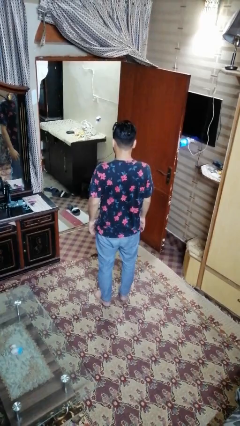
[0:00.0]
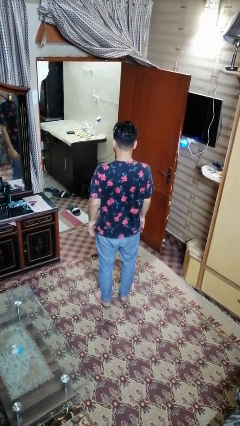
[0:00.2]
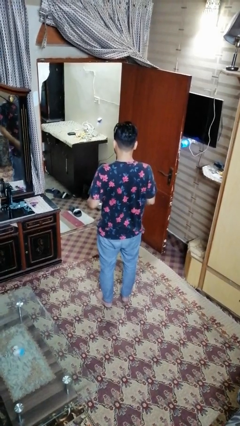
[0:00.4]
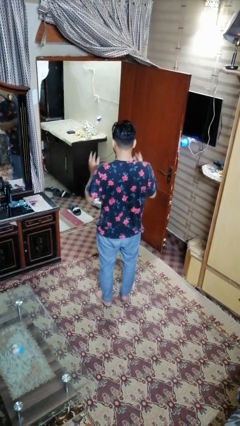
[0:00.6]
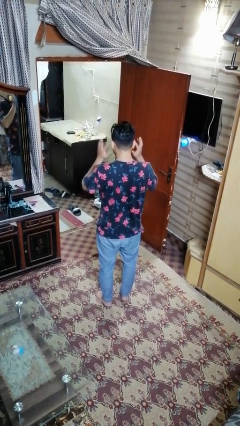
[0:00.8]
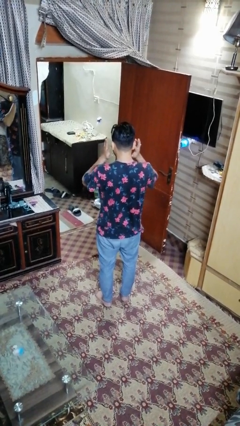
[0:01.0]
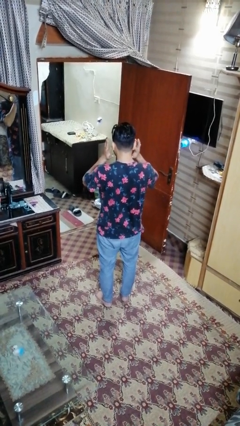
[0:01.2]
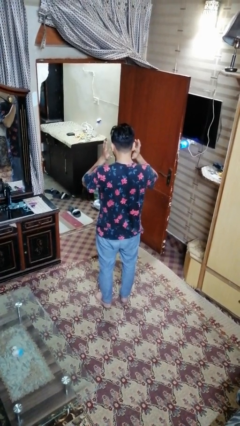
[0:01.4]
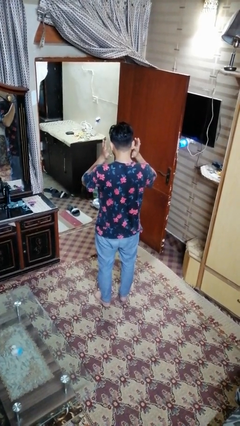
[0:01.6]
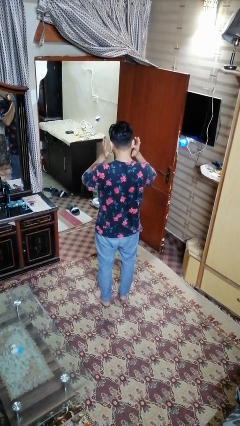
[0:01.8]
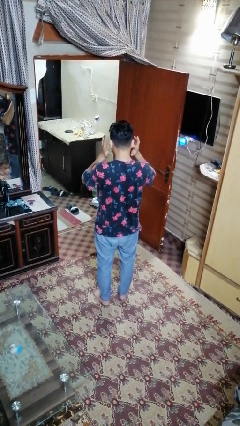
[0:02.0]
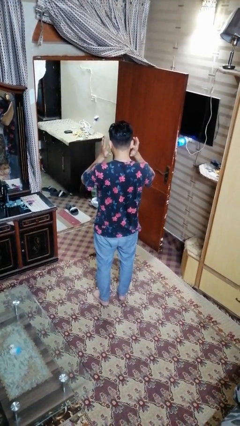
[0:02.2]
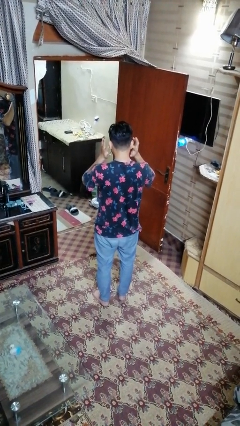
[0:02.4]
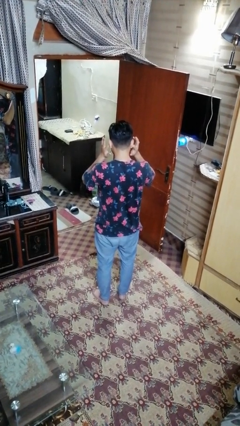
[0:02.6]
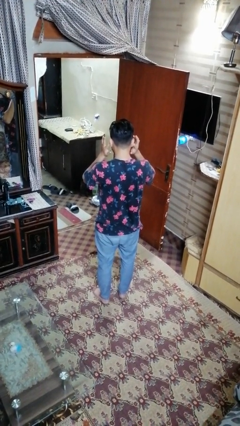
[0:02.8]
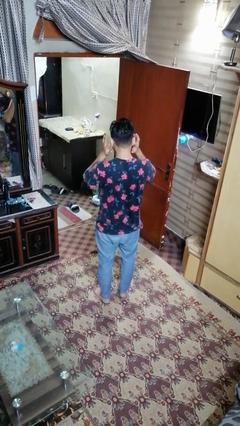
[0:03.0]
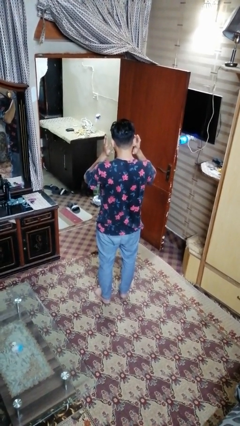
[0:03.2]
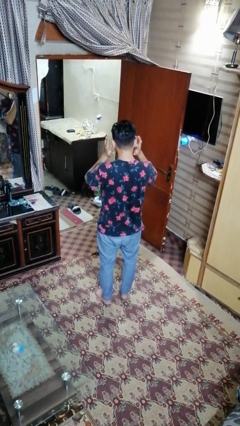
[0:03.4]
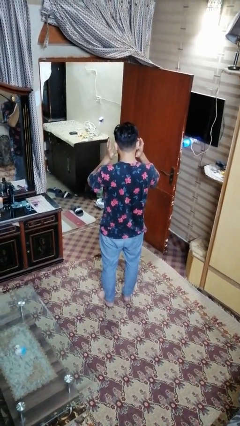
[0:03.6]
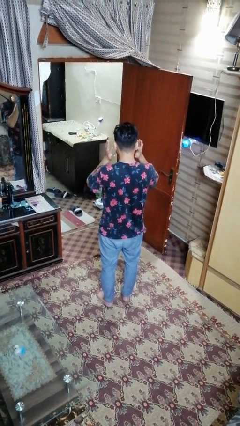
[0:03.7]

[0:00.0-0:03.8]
person puts fingers in ear

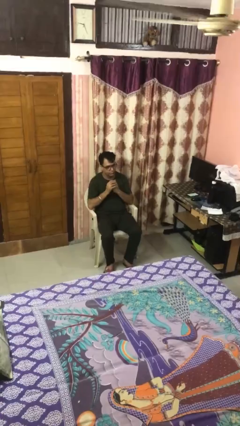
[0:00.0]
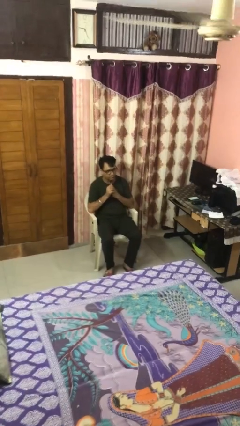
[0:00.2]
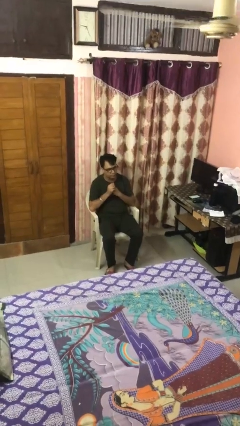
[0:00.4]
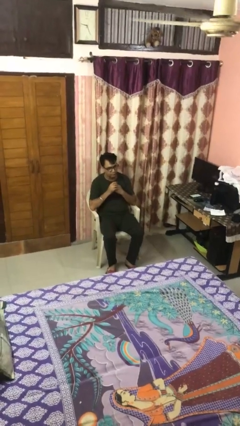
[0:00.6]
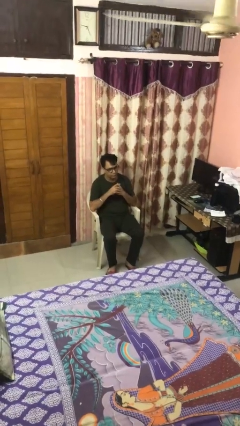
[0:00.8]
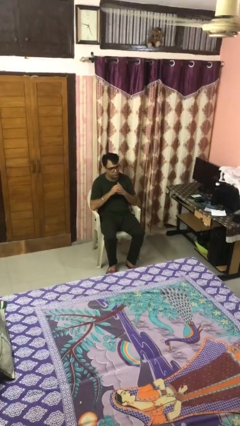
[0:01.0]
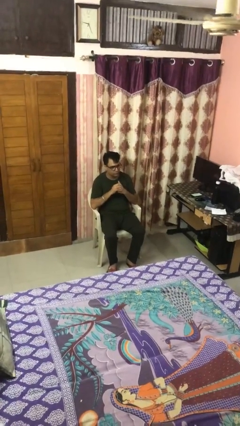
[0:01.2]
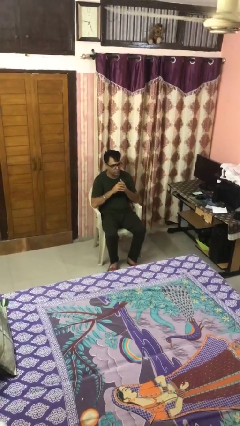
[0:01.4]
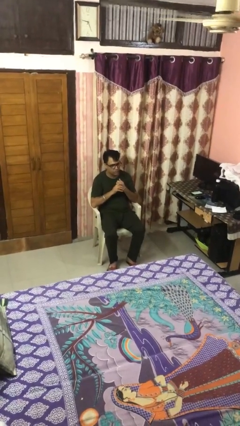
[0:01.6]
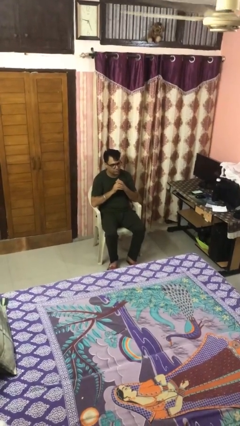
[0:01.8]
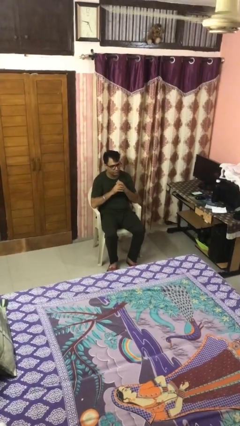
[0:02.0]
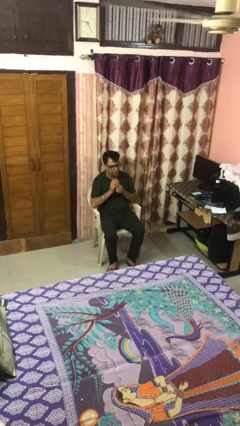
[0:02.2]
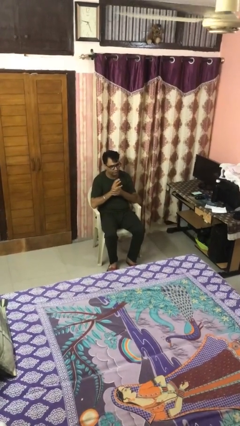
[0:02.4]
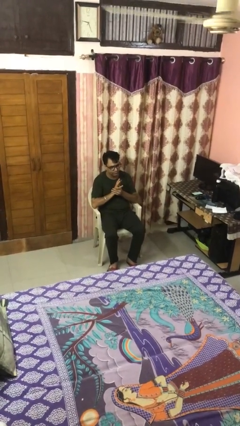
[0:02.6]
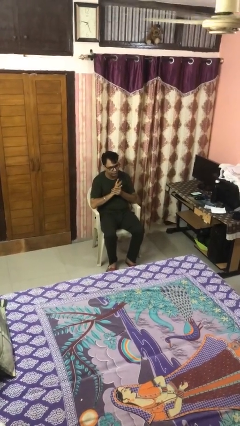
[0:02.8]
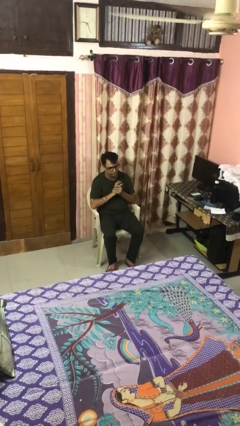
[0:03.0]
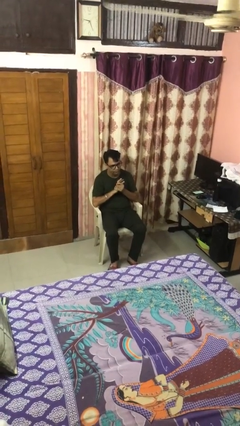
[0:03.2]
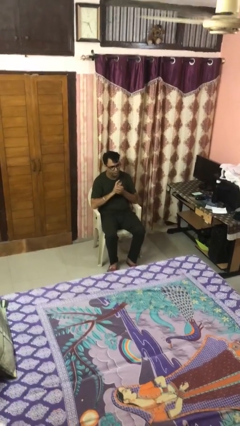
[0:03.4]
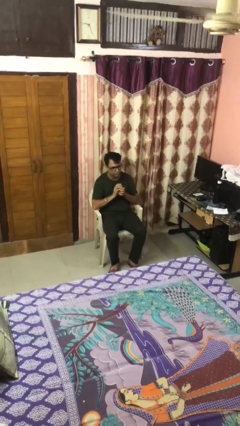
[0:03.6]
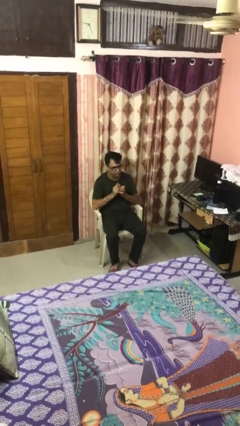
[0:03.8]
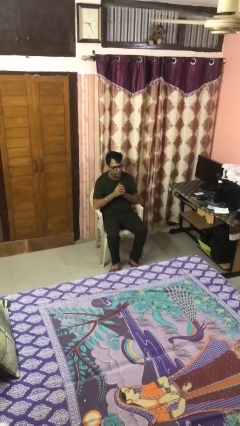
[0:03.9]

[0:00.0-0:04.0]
person cracks knuckles

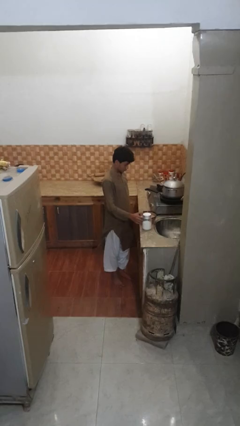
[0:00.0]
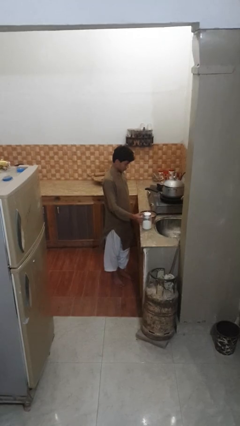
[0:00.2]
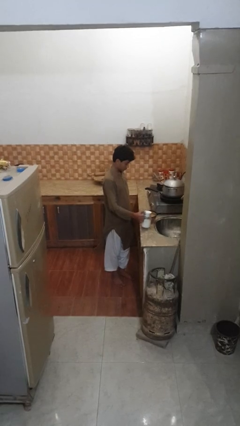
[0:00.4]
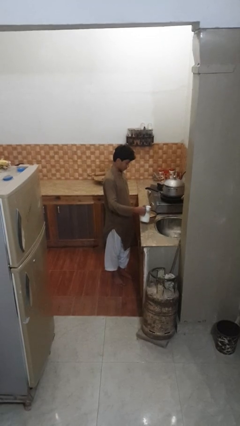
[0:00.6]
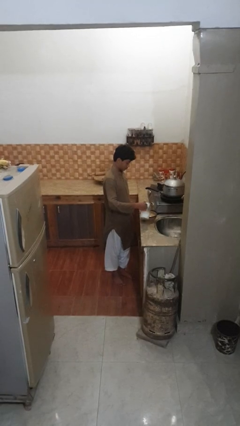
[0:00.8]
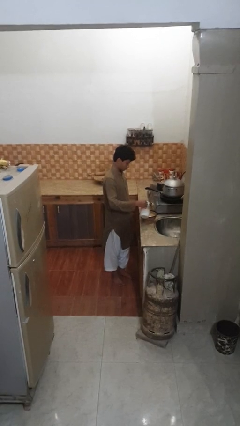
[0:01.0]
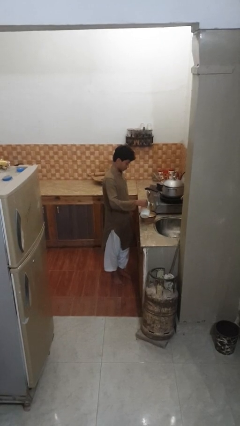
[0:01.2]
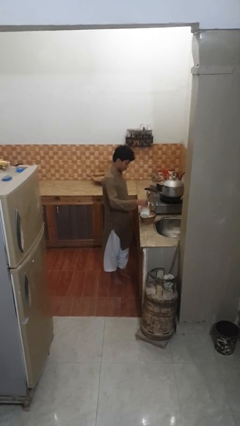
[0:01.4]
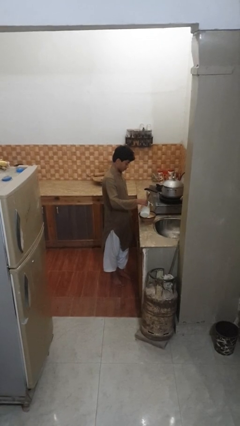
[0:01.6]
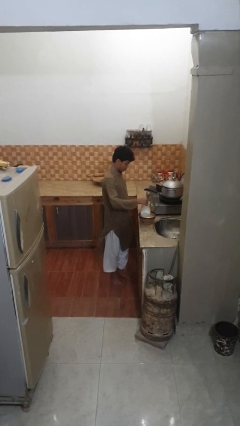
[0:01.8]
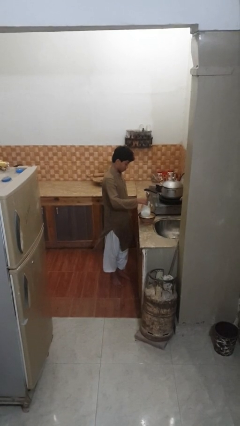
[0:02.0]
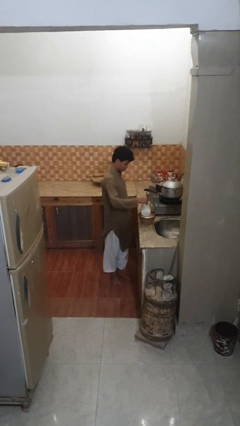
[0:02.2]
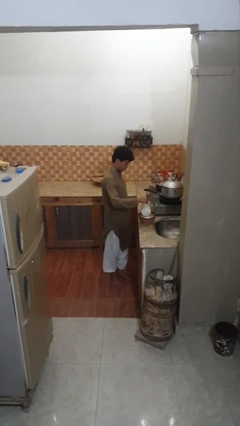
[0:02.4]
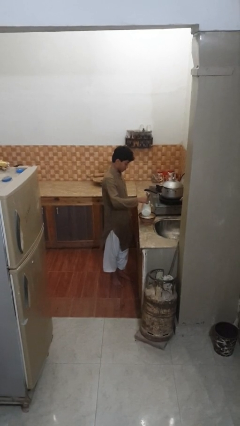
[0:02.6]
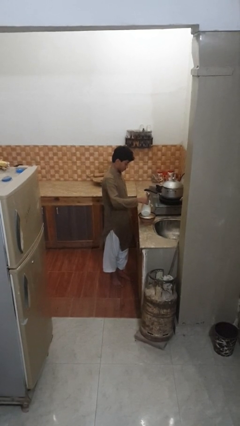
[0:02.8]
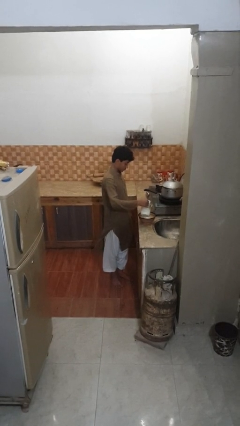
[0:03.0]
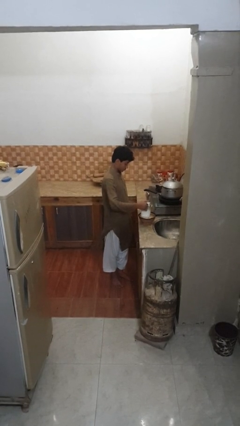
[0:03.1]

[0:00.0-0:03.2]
person pours into bowl

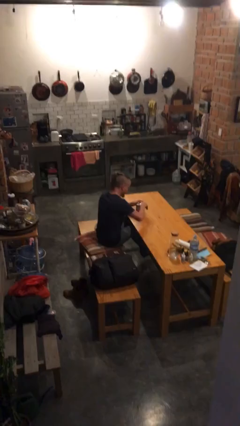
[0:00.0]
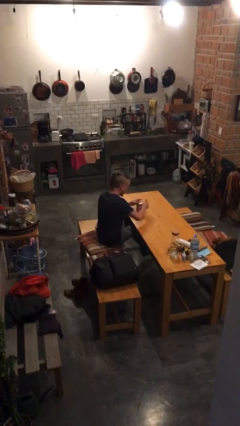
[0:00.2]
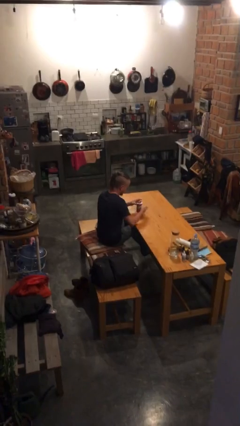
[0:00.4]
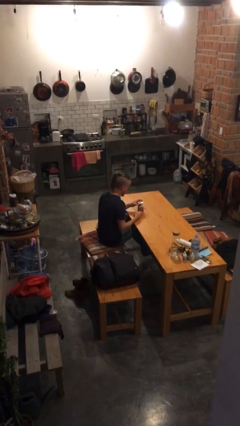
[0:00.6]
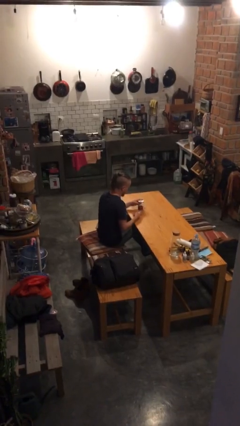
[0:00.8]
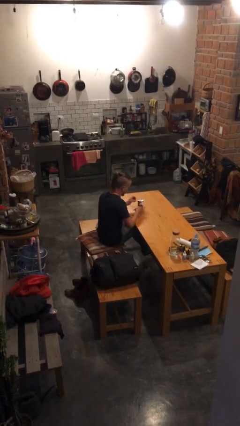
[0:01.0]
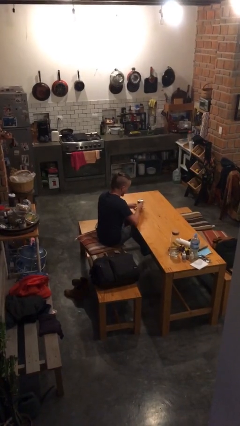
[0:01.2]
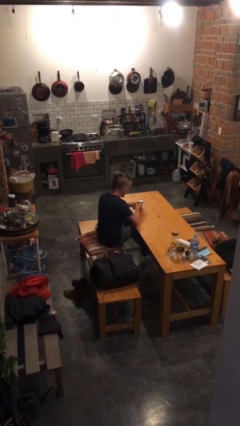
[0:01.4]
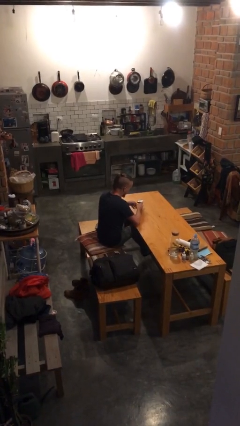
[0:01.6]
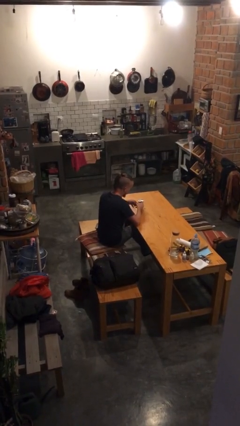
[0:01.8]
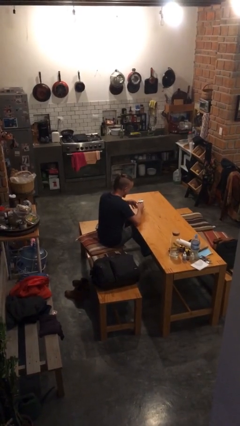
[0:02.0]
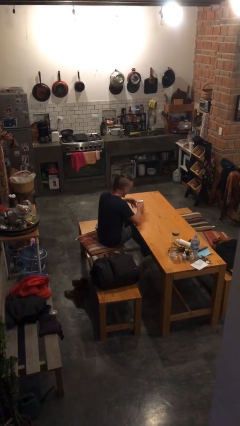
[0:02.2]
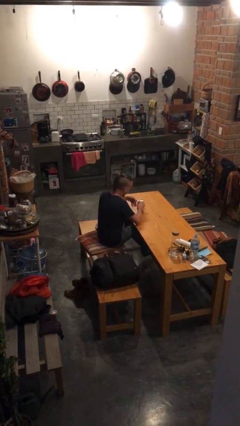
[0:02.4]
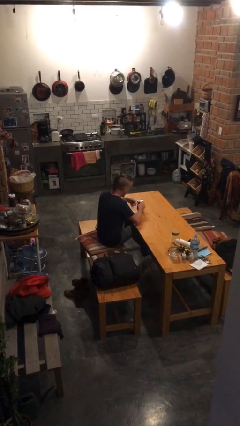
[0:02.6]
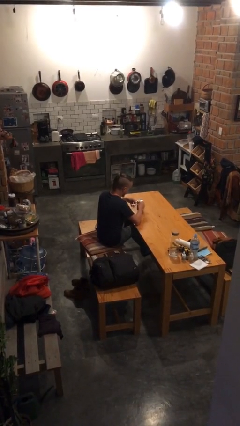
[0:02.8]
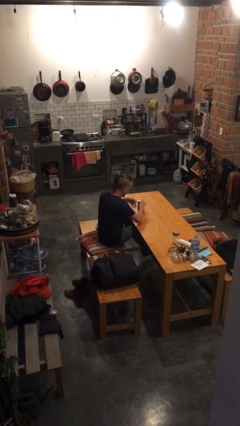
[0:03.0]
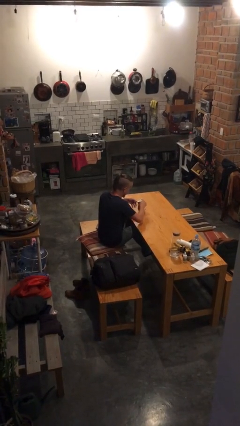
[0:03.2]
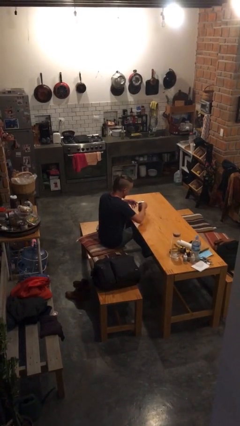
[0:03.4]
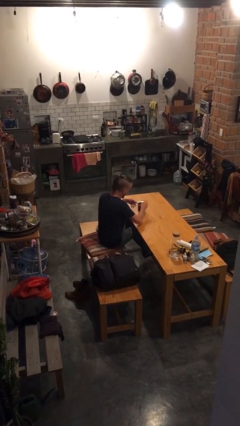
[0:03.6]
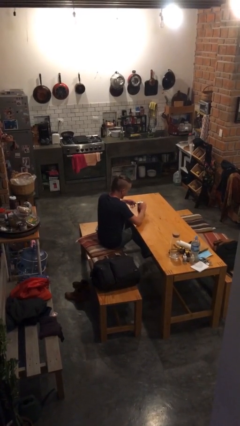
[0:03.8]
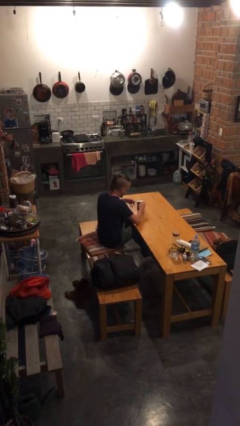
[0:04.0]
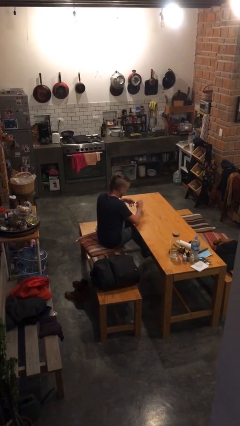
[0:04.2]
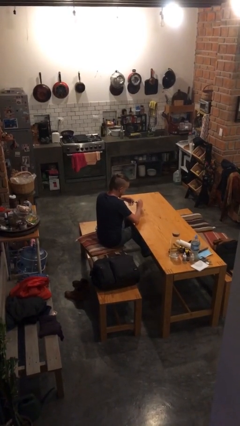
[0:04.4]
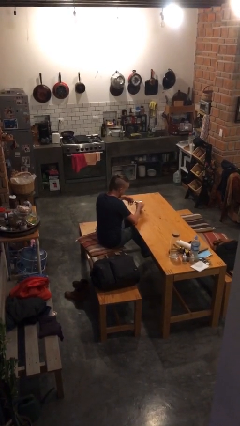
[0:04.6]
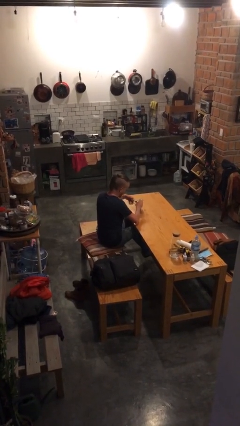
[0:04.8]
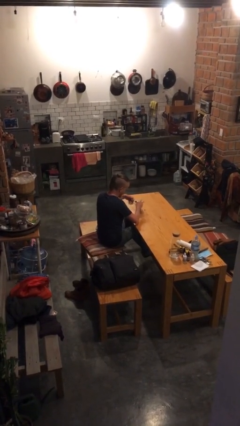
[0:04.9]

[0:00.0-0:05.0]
person opens can with can opener

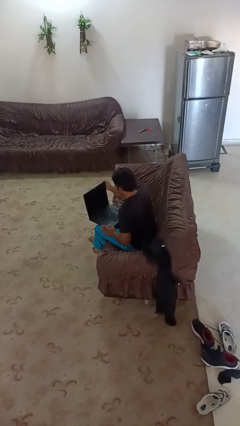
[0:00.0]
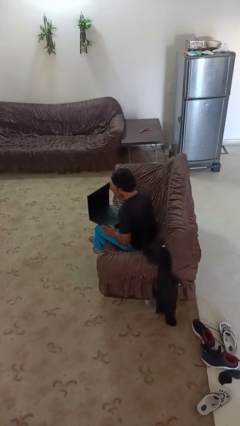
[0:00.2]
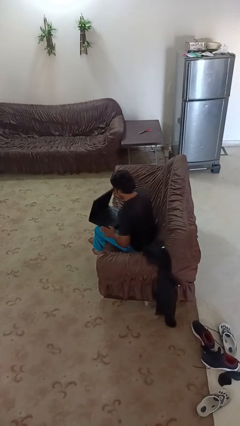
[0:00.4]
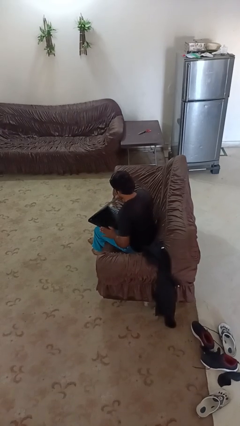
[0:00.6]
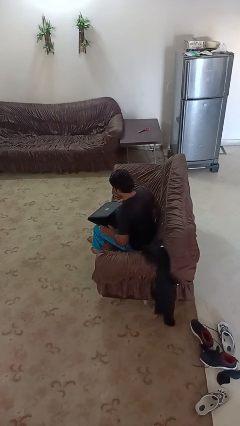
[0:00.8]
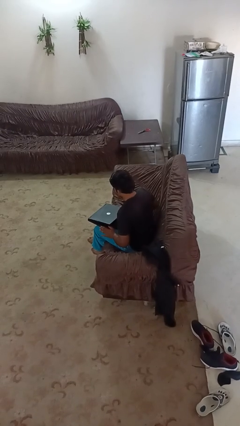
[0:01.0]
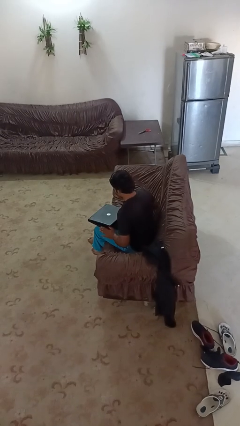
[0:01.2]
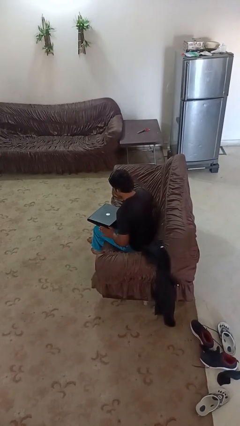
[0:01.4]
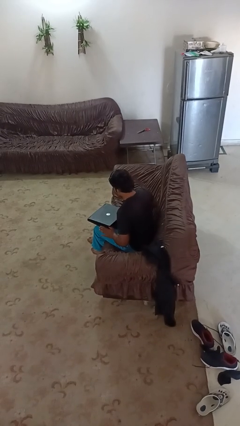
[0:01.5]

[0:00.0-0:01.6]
person closes laptop
